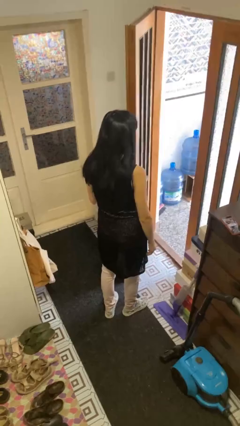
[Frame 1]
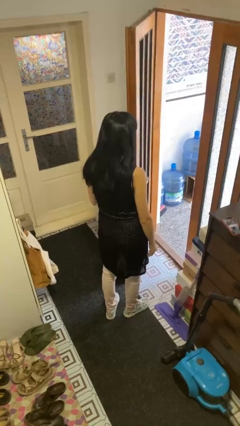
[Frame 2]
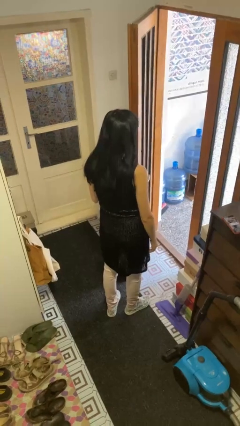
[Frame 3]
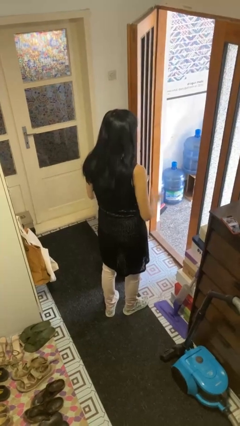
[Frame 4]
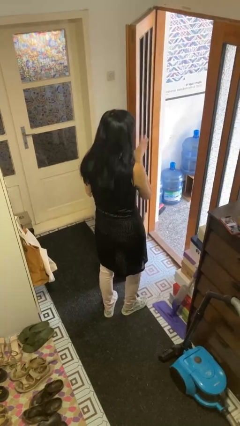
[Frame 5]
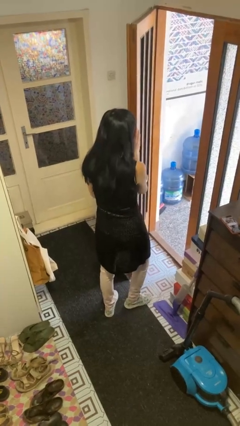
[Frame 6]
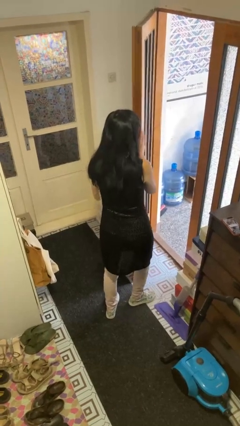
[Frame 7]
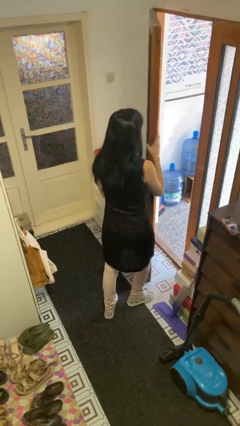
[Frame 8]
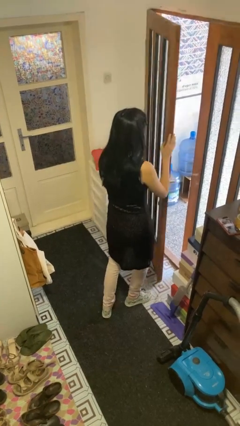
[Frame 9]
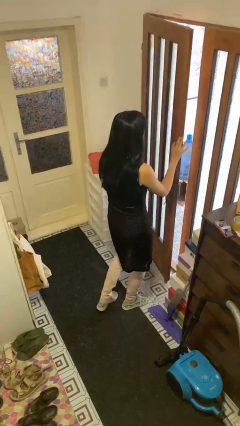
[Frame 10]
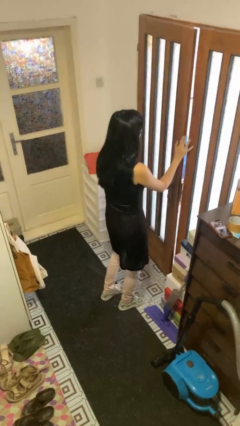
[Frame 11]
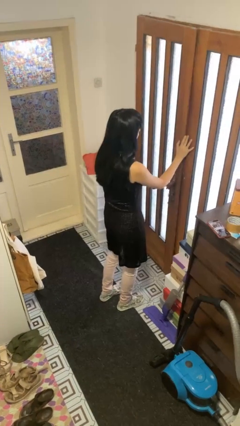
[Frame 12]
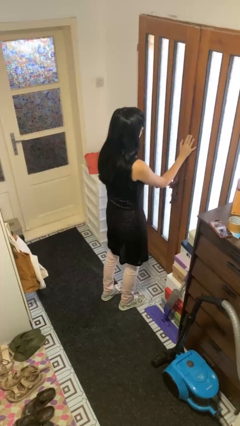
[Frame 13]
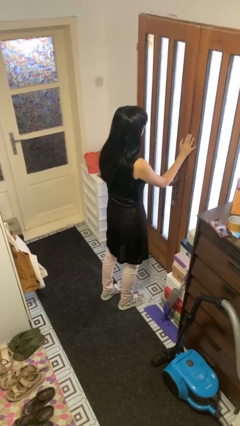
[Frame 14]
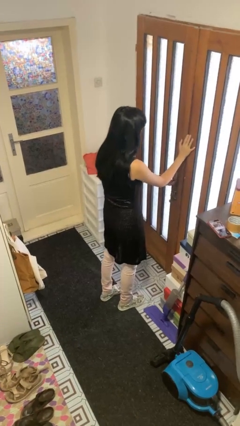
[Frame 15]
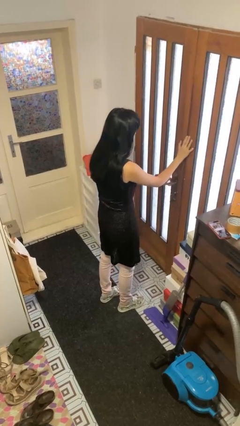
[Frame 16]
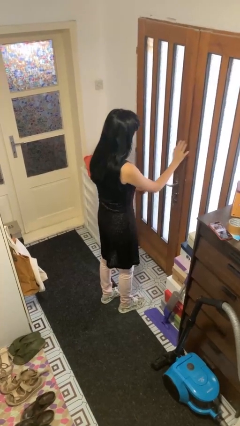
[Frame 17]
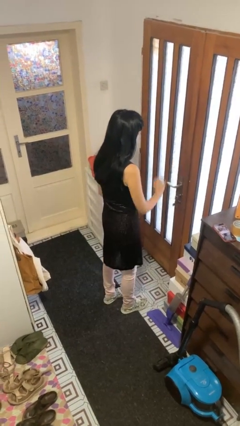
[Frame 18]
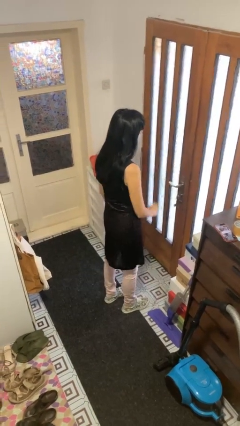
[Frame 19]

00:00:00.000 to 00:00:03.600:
person closes facility door

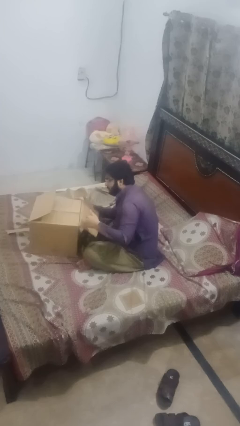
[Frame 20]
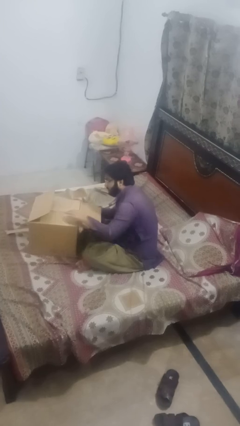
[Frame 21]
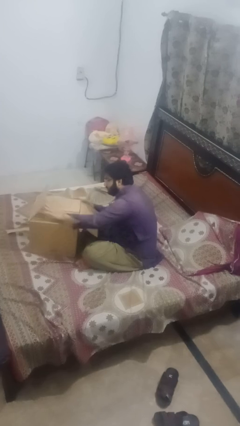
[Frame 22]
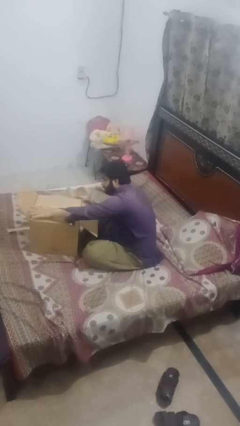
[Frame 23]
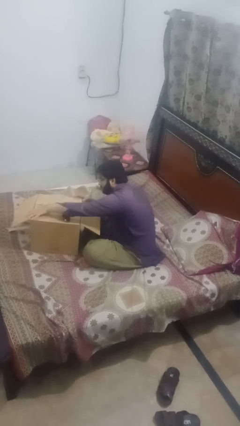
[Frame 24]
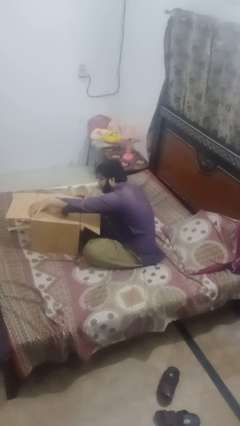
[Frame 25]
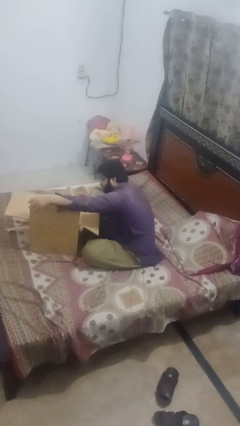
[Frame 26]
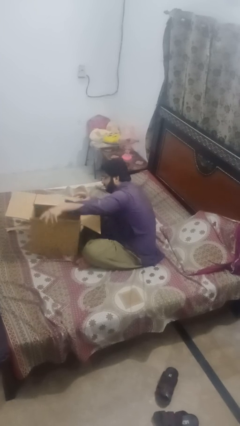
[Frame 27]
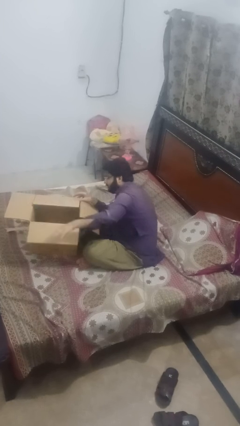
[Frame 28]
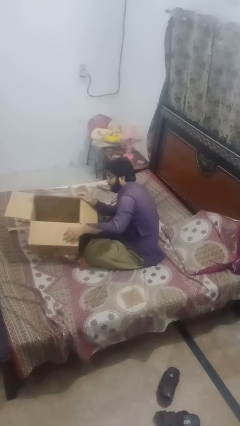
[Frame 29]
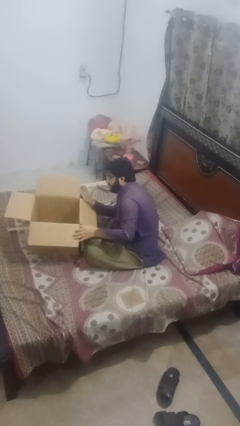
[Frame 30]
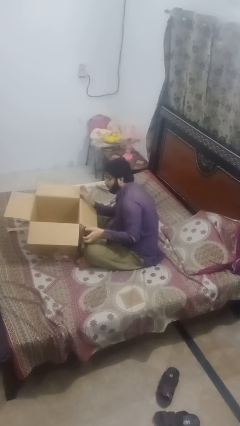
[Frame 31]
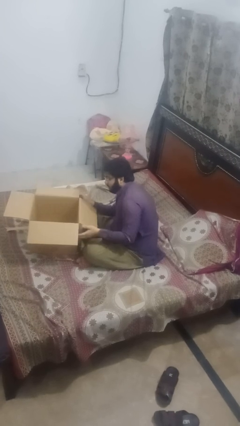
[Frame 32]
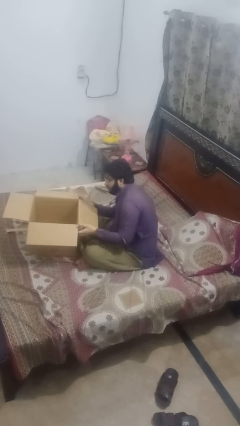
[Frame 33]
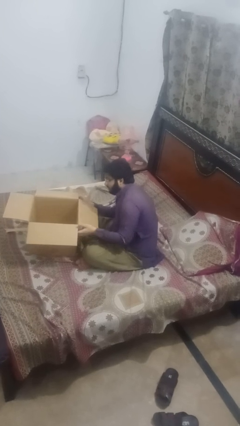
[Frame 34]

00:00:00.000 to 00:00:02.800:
person opens box

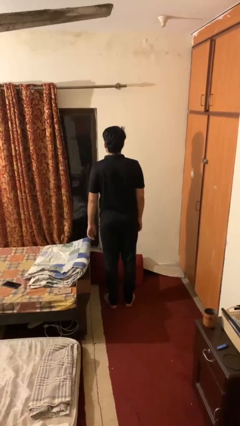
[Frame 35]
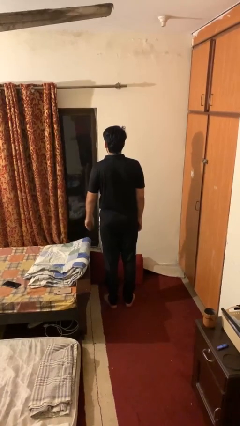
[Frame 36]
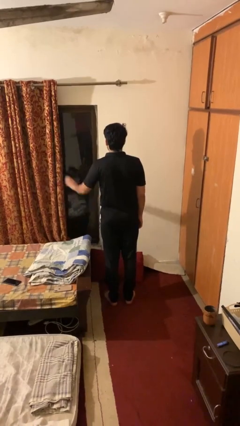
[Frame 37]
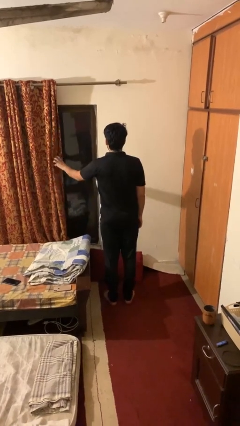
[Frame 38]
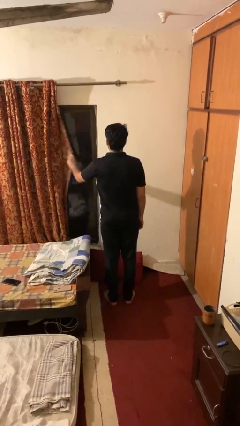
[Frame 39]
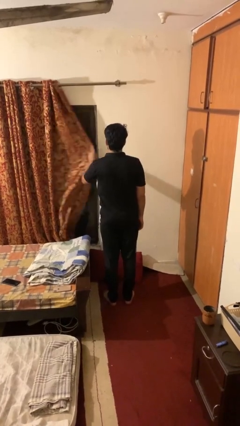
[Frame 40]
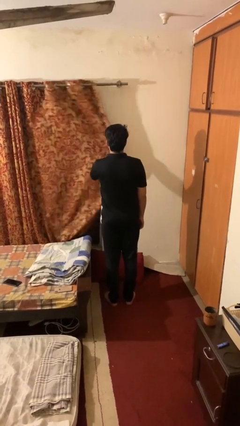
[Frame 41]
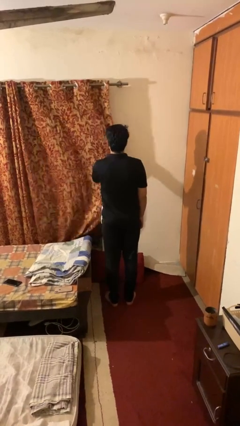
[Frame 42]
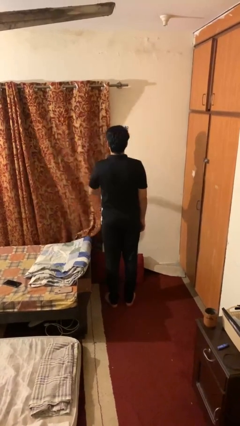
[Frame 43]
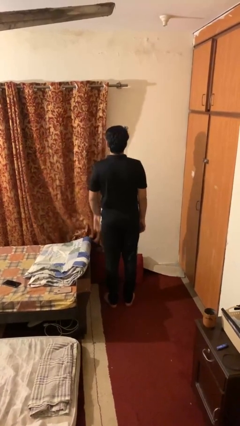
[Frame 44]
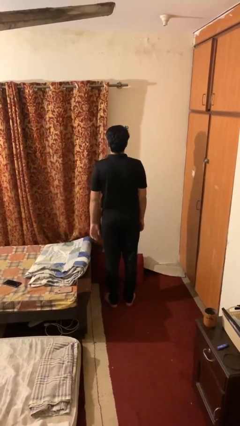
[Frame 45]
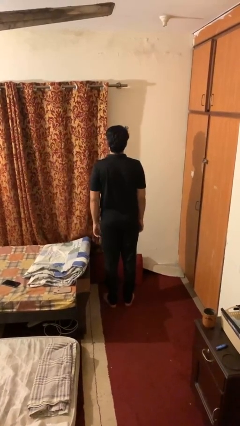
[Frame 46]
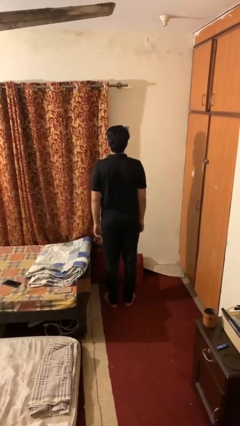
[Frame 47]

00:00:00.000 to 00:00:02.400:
person closes curtains

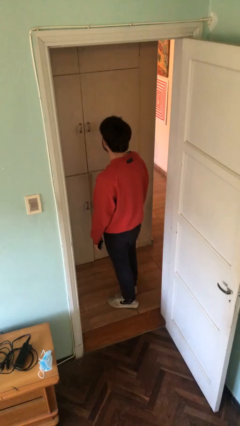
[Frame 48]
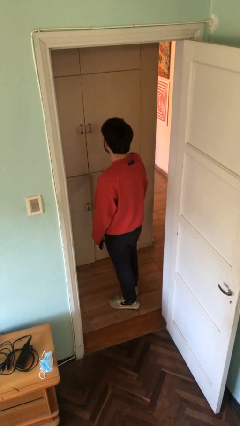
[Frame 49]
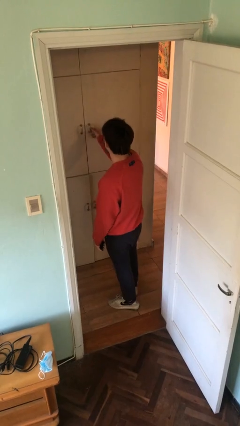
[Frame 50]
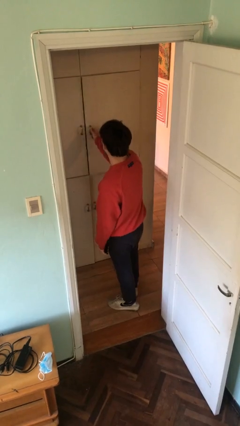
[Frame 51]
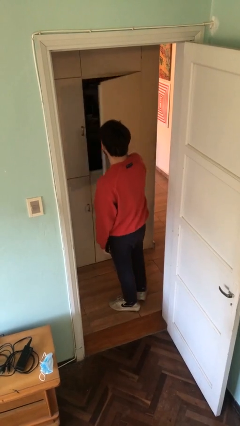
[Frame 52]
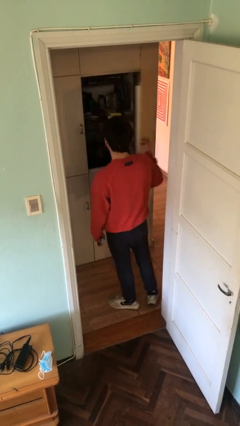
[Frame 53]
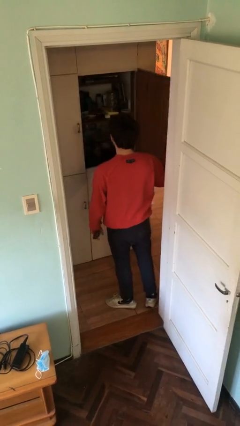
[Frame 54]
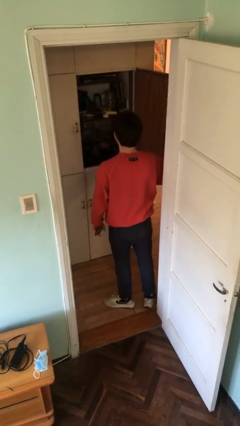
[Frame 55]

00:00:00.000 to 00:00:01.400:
person opens closet door

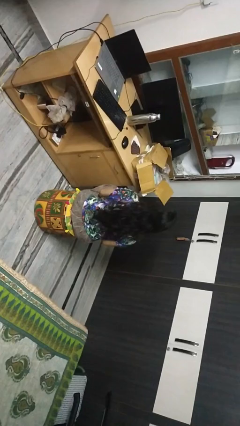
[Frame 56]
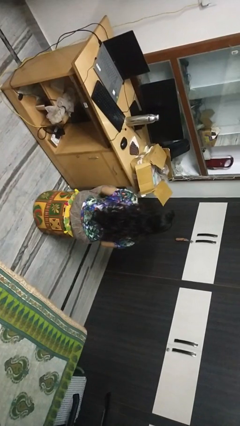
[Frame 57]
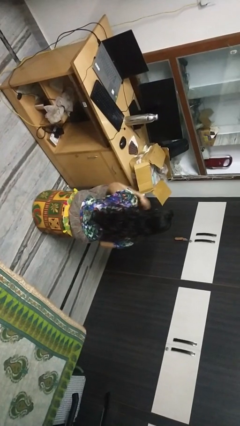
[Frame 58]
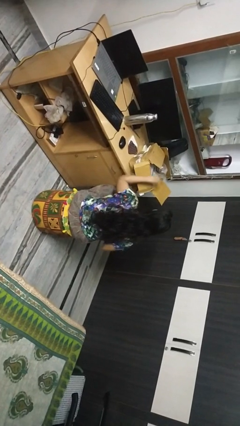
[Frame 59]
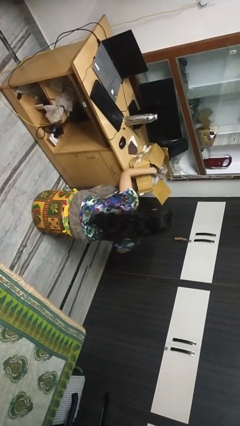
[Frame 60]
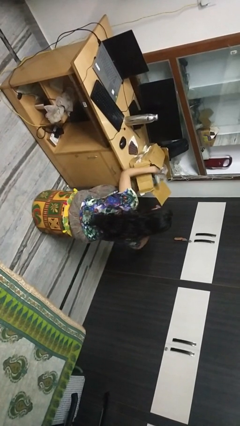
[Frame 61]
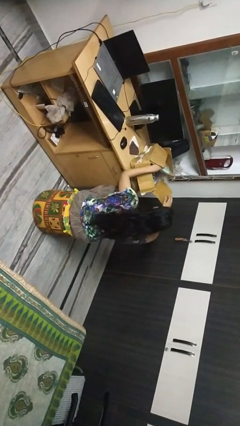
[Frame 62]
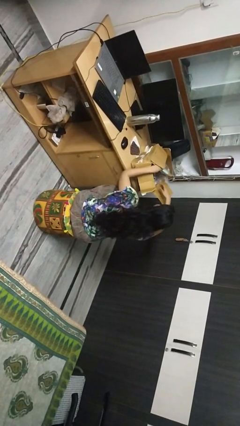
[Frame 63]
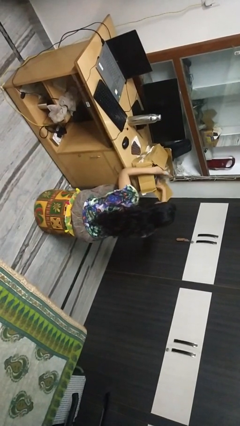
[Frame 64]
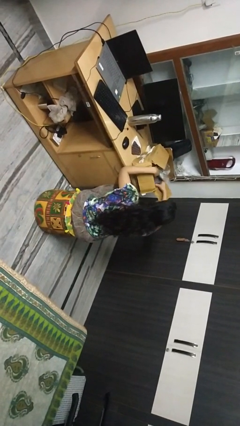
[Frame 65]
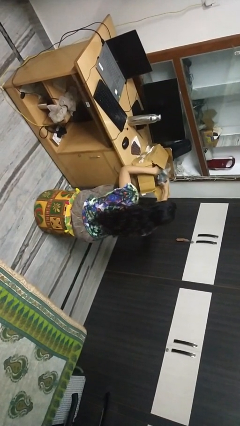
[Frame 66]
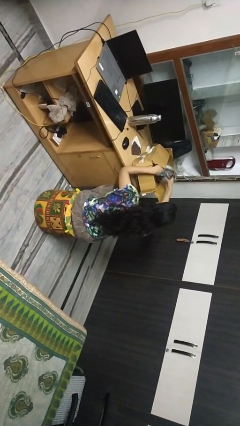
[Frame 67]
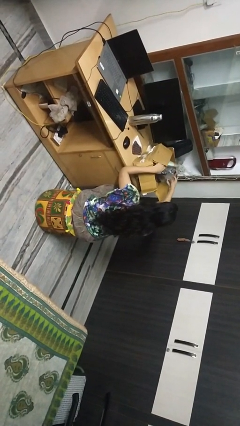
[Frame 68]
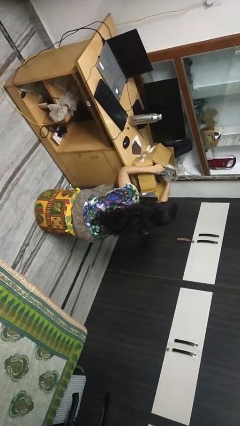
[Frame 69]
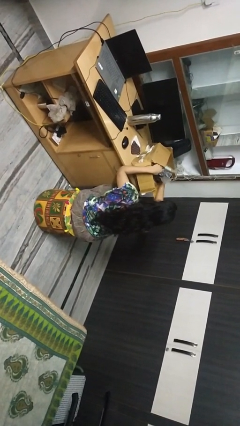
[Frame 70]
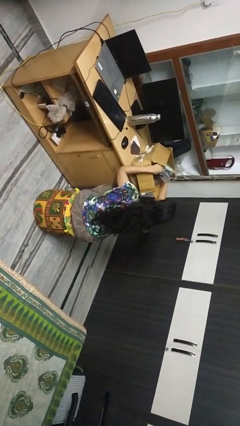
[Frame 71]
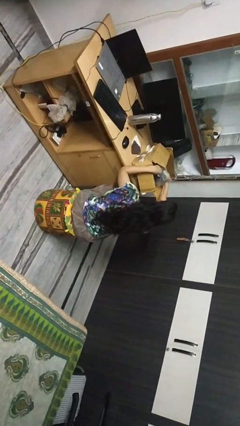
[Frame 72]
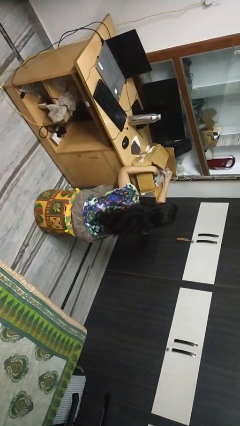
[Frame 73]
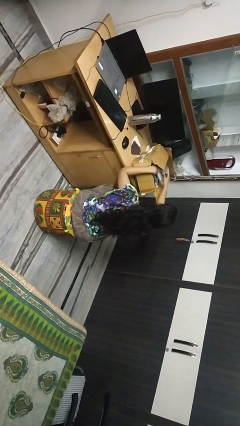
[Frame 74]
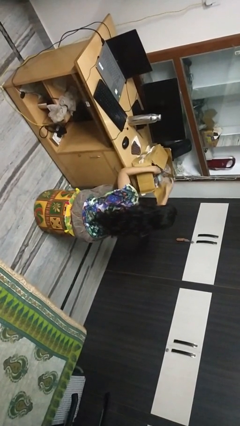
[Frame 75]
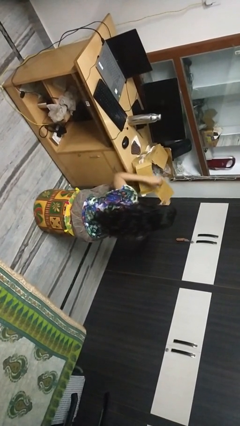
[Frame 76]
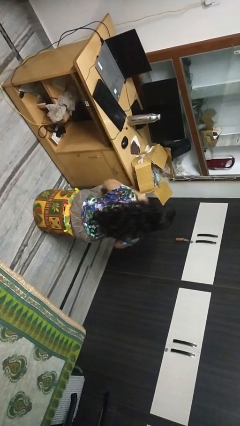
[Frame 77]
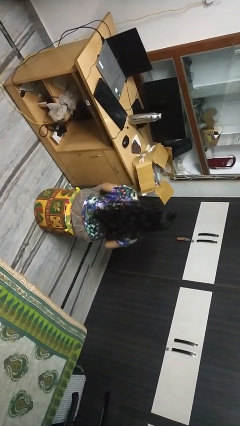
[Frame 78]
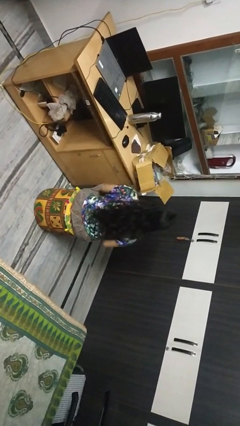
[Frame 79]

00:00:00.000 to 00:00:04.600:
person searches in box

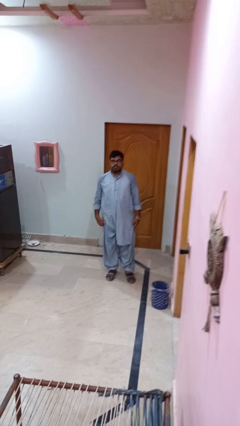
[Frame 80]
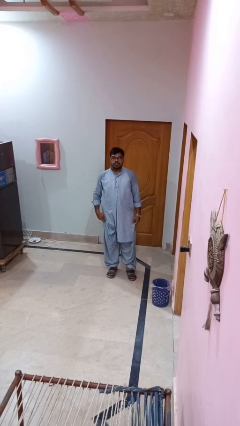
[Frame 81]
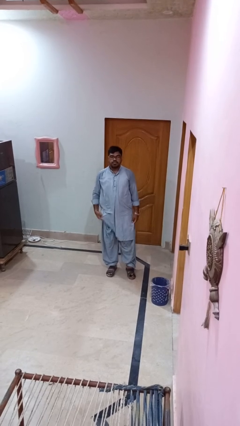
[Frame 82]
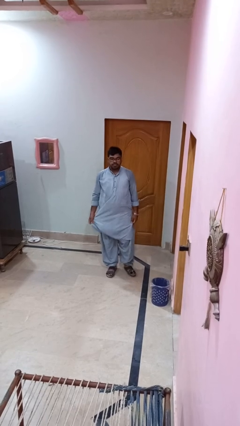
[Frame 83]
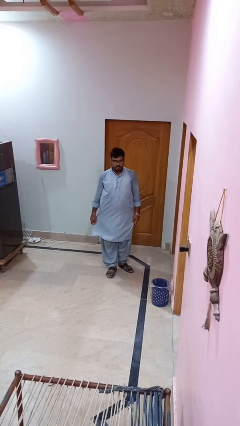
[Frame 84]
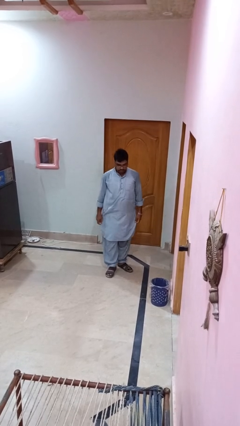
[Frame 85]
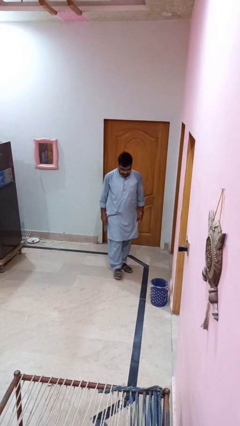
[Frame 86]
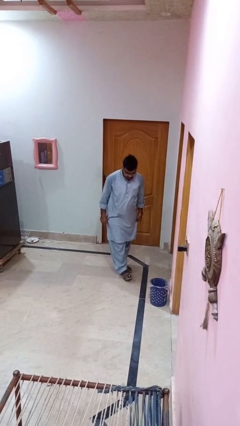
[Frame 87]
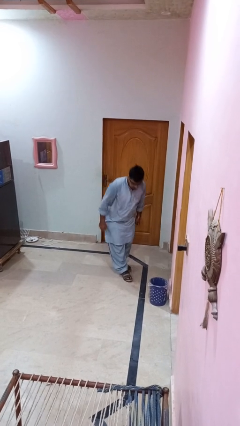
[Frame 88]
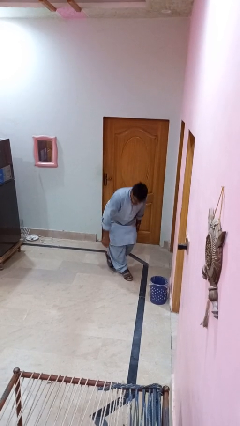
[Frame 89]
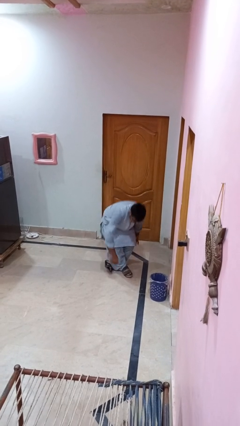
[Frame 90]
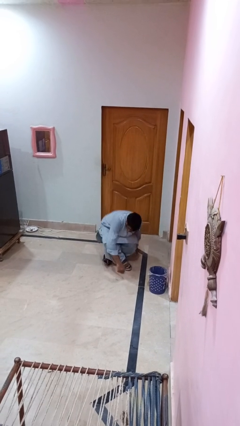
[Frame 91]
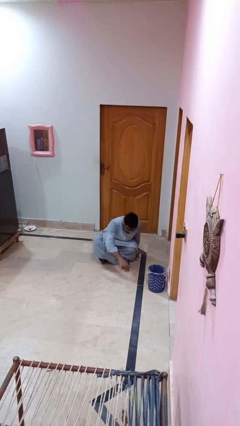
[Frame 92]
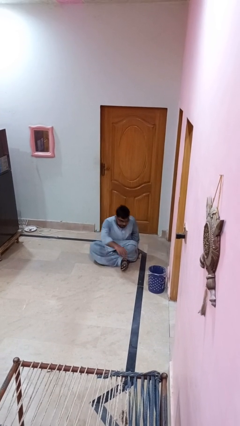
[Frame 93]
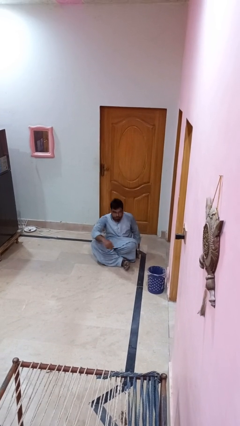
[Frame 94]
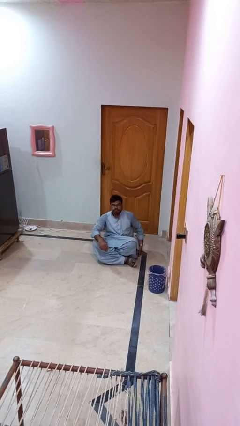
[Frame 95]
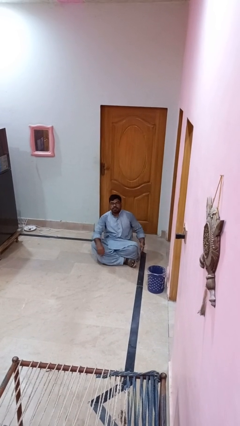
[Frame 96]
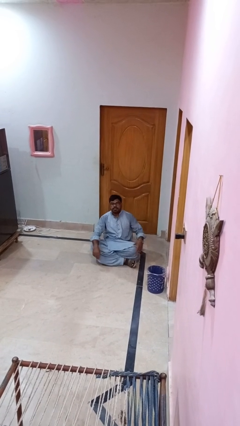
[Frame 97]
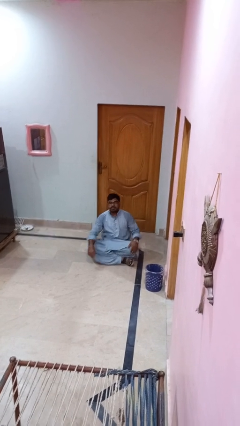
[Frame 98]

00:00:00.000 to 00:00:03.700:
person sits crisscross
